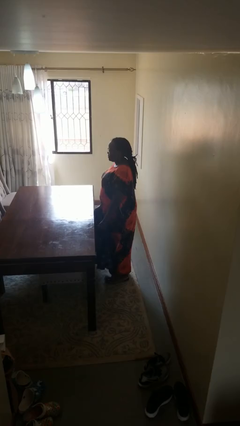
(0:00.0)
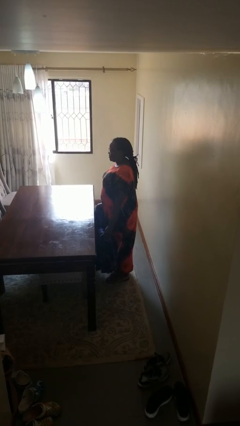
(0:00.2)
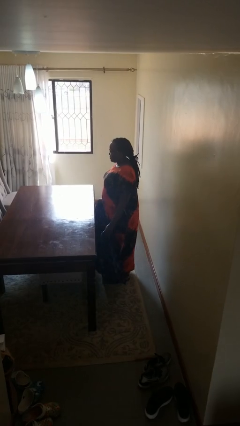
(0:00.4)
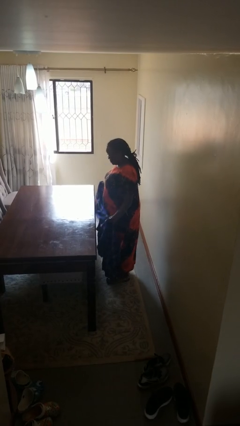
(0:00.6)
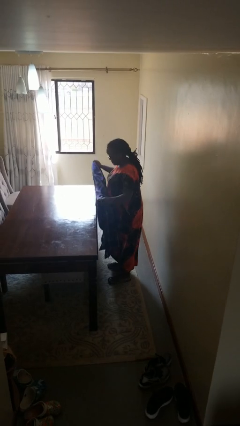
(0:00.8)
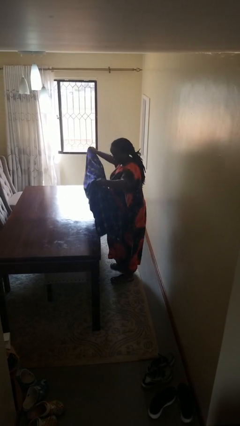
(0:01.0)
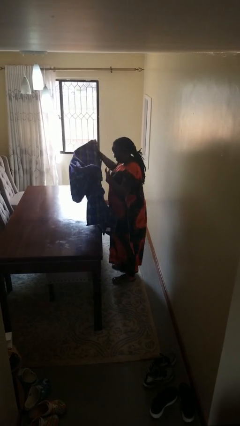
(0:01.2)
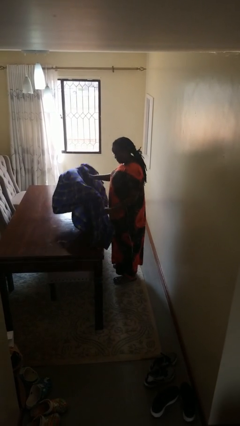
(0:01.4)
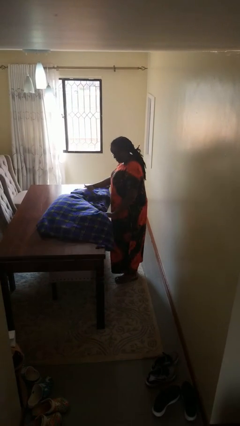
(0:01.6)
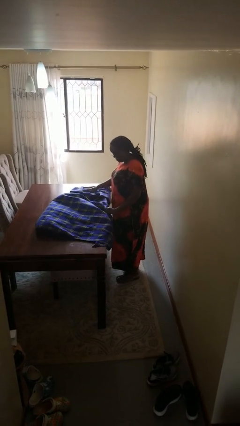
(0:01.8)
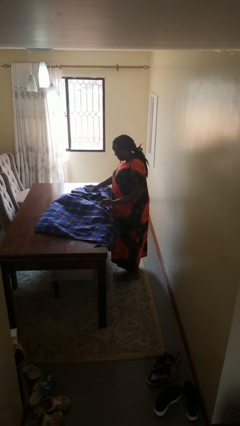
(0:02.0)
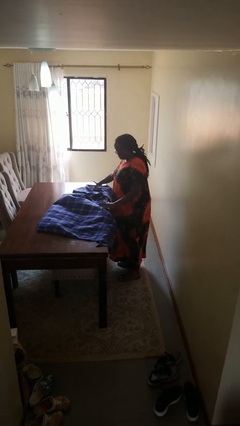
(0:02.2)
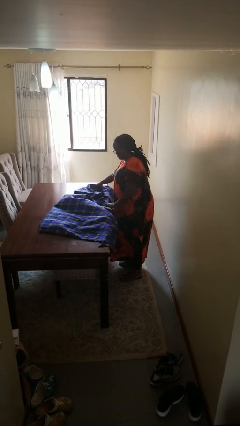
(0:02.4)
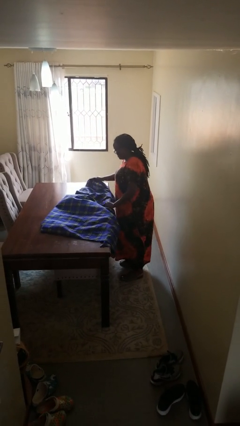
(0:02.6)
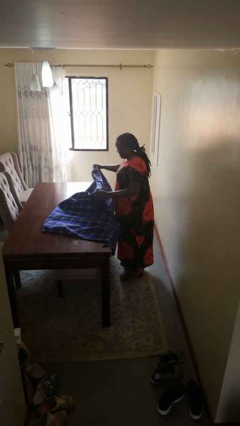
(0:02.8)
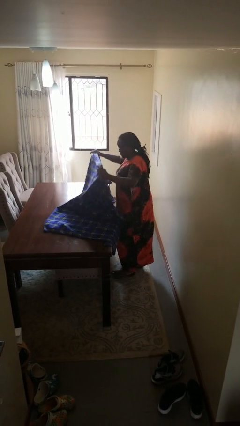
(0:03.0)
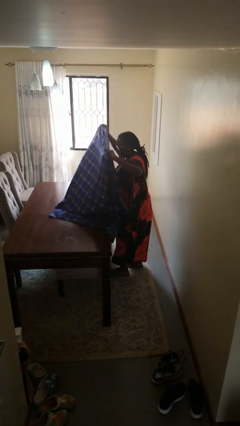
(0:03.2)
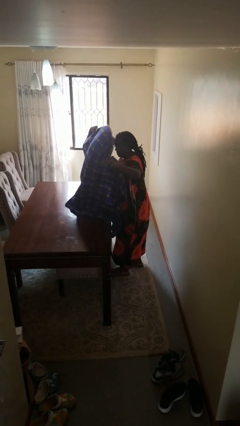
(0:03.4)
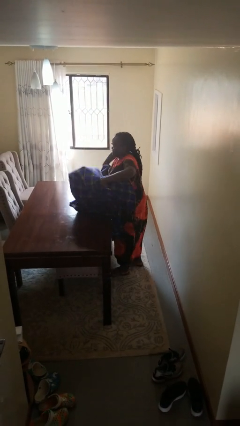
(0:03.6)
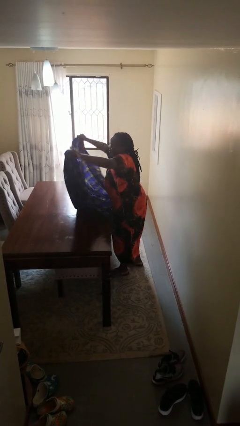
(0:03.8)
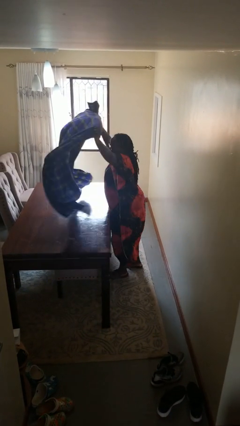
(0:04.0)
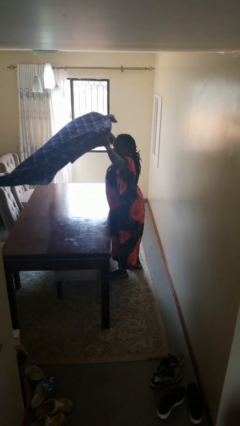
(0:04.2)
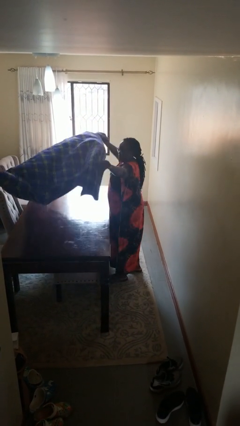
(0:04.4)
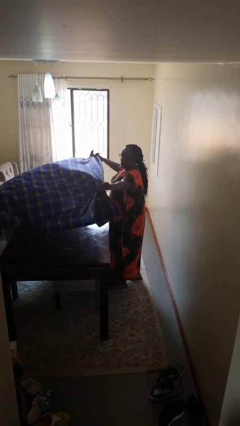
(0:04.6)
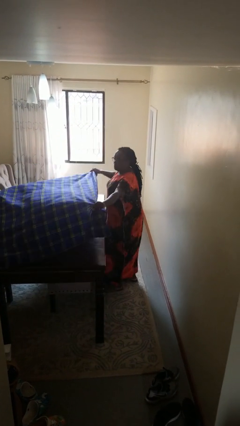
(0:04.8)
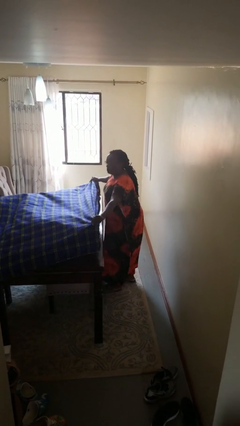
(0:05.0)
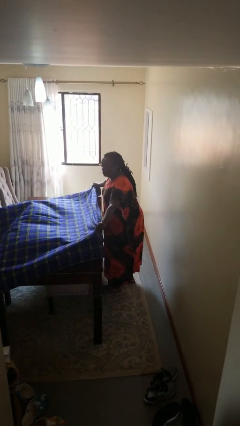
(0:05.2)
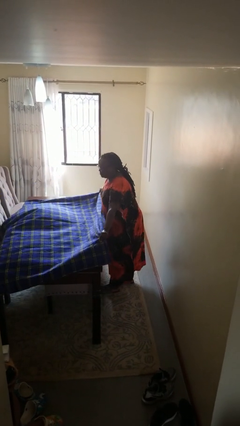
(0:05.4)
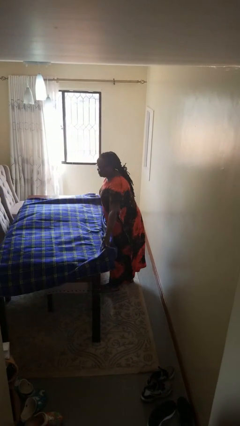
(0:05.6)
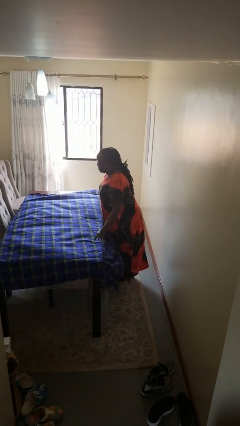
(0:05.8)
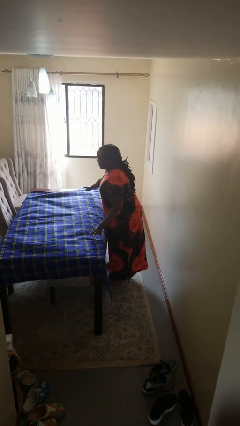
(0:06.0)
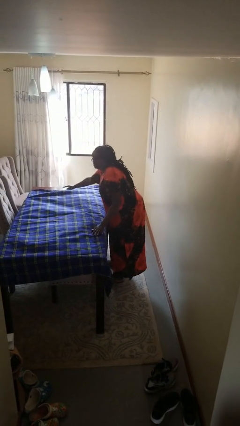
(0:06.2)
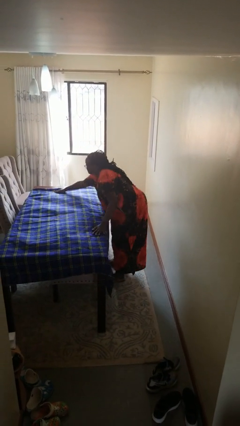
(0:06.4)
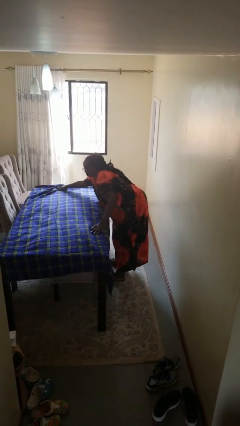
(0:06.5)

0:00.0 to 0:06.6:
person spreads tablecloth

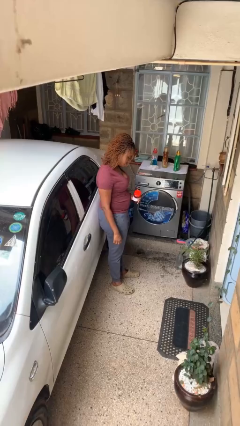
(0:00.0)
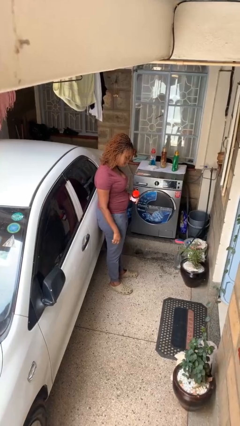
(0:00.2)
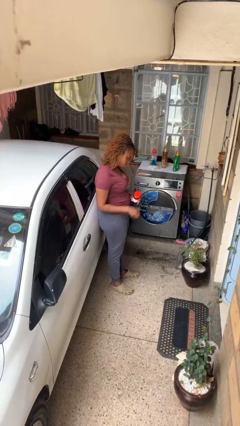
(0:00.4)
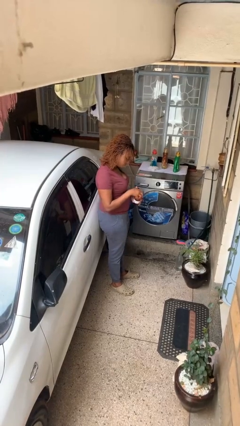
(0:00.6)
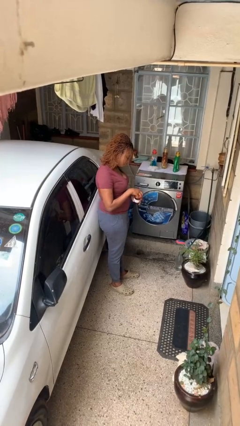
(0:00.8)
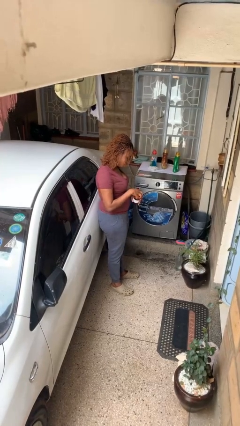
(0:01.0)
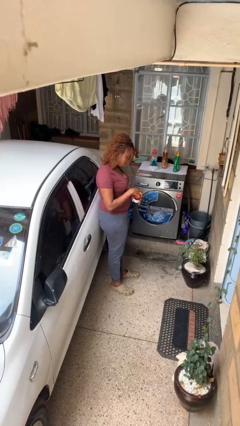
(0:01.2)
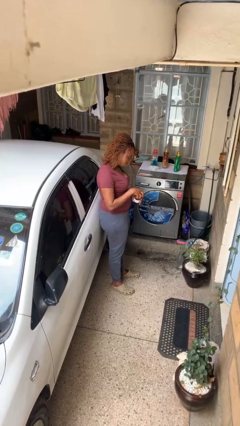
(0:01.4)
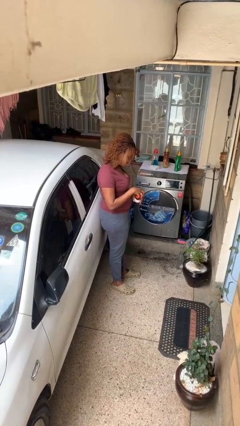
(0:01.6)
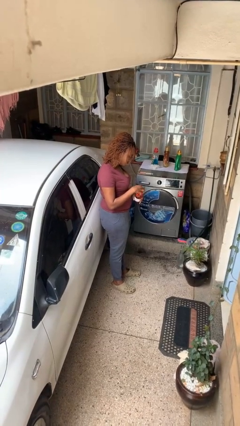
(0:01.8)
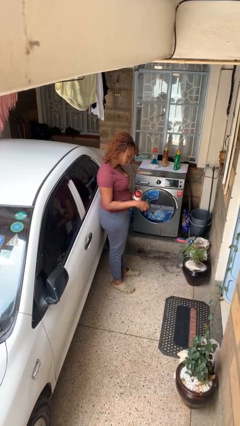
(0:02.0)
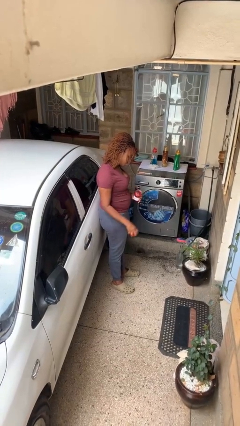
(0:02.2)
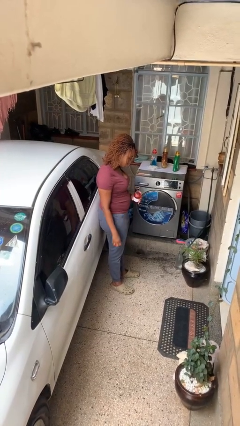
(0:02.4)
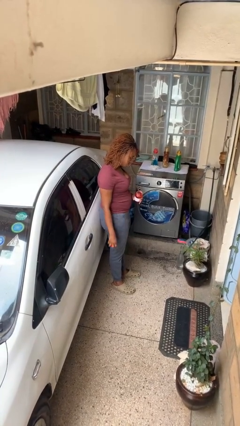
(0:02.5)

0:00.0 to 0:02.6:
person opens jar

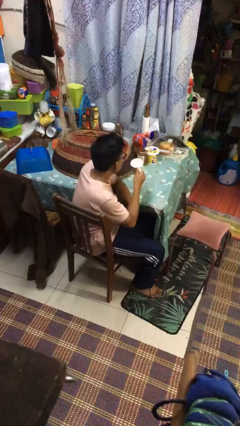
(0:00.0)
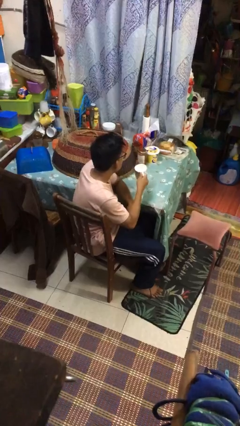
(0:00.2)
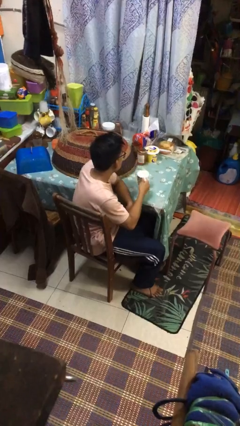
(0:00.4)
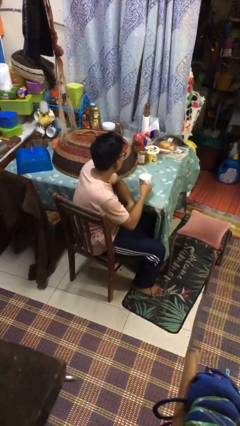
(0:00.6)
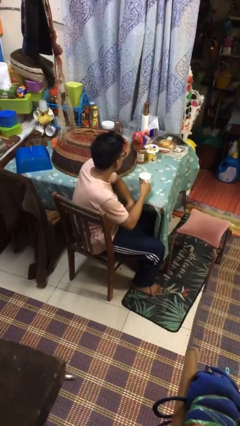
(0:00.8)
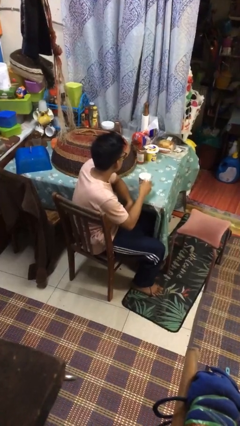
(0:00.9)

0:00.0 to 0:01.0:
person puts down object on table

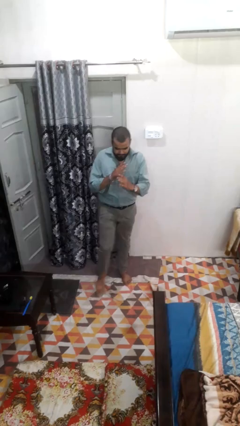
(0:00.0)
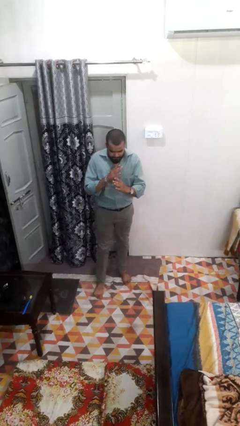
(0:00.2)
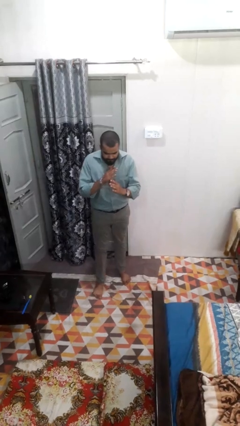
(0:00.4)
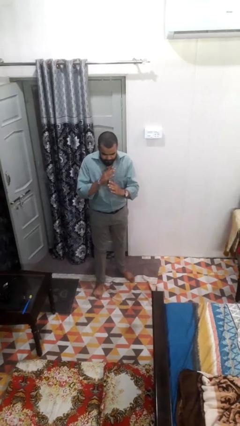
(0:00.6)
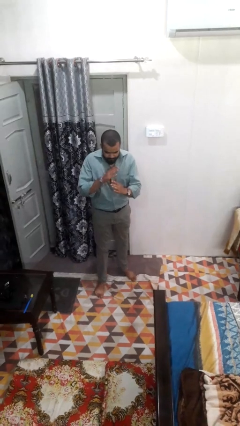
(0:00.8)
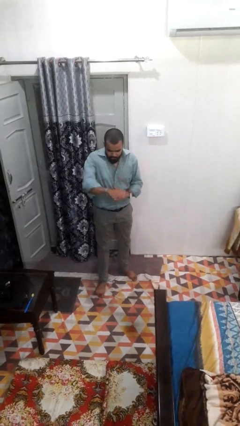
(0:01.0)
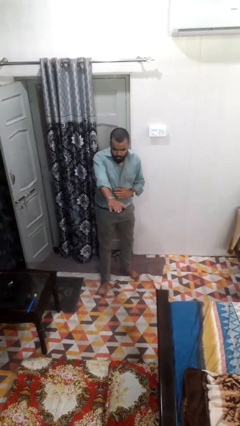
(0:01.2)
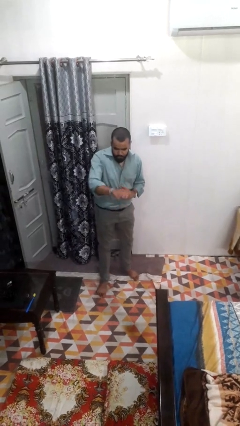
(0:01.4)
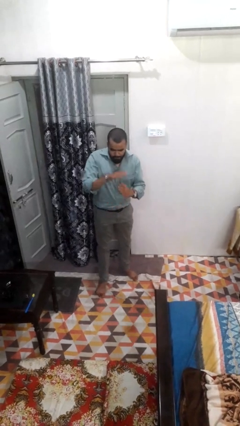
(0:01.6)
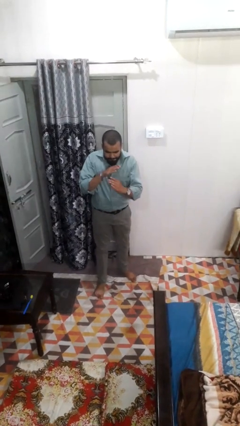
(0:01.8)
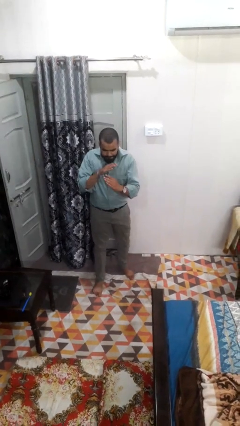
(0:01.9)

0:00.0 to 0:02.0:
person karate chop

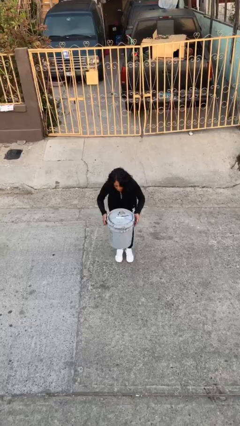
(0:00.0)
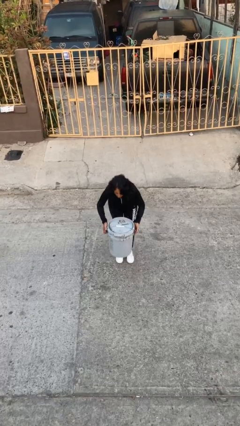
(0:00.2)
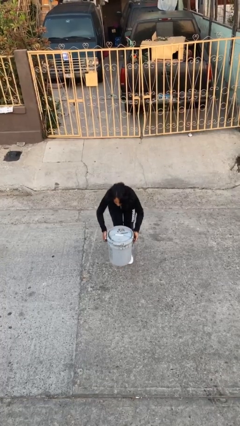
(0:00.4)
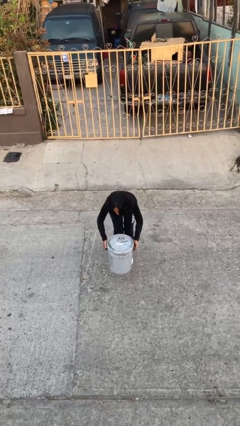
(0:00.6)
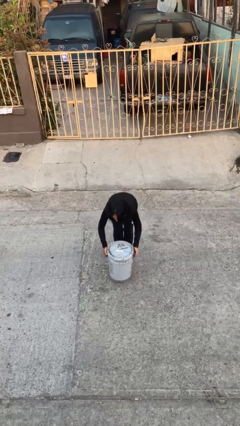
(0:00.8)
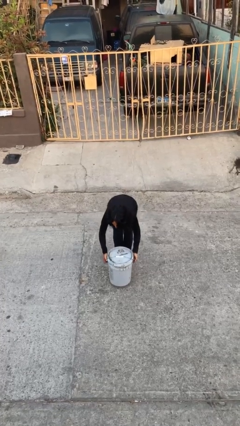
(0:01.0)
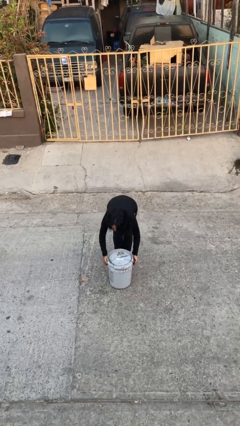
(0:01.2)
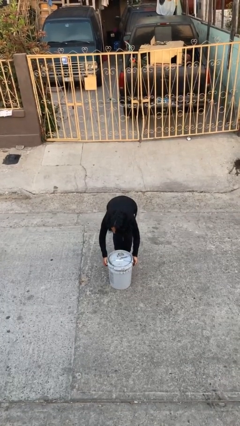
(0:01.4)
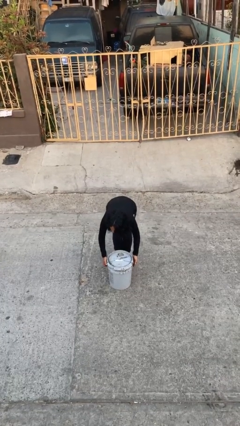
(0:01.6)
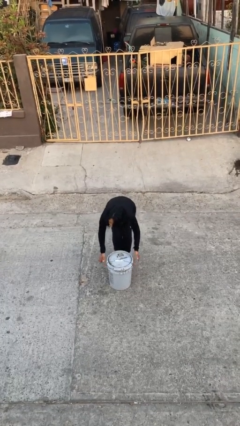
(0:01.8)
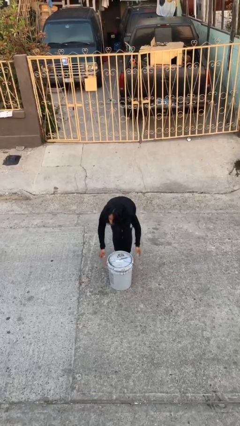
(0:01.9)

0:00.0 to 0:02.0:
person puts down object on floor

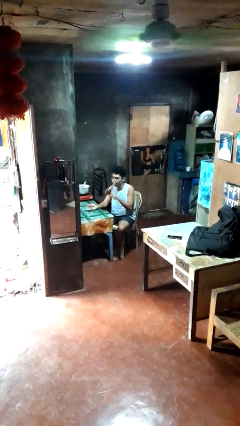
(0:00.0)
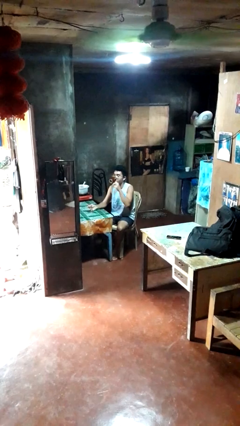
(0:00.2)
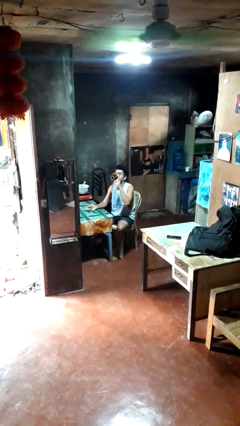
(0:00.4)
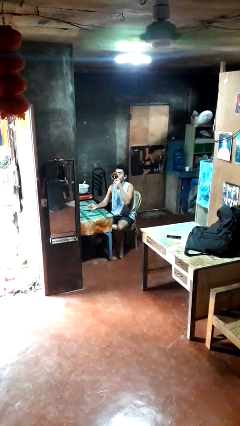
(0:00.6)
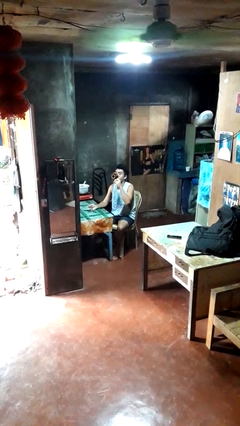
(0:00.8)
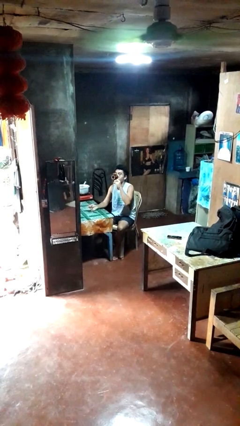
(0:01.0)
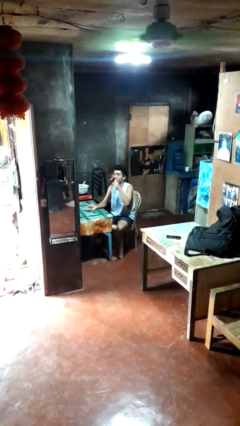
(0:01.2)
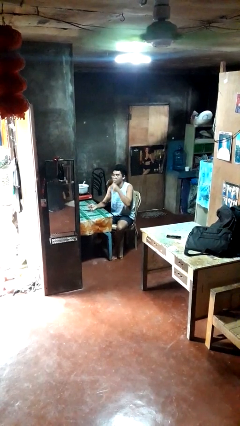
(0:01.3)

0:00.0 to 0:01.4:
person drinks from mug

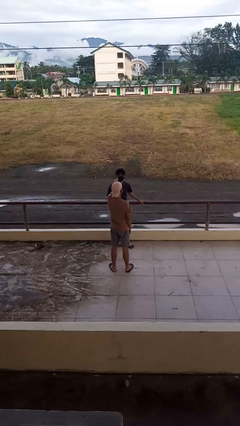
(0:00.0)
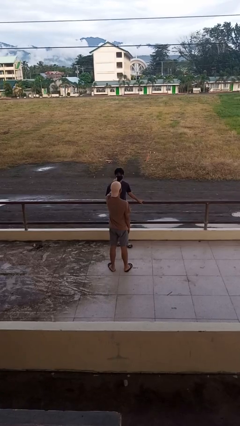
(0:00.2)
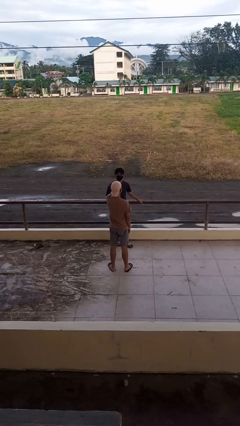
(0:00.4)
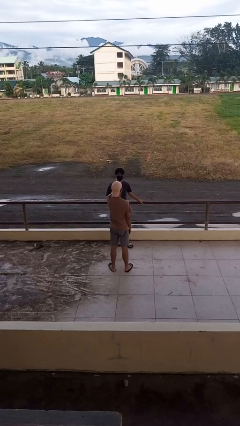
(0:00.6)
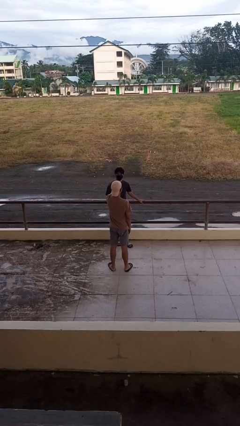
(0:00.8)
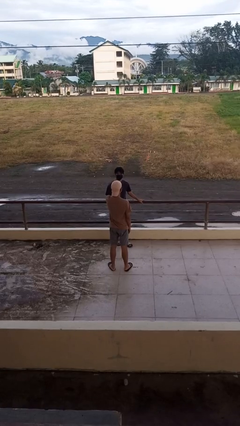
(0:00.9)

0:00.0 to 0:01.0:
person points at person

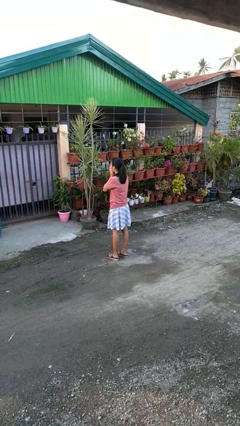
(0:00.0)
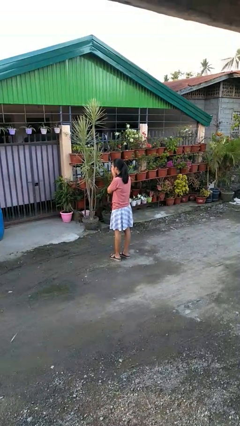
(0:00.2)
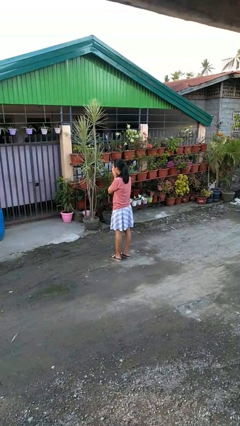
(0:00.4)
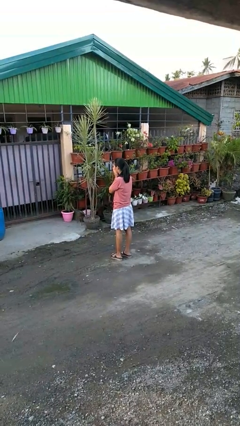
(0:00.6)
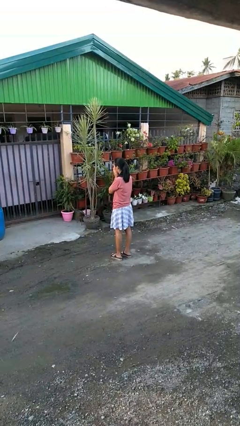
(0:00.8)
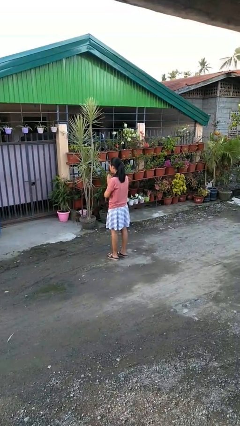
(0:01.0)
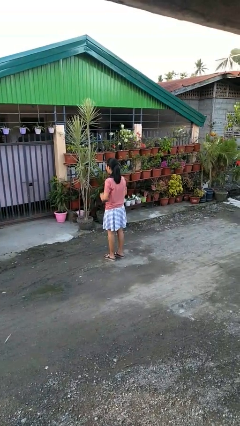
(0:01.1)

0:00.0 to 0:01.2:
person blows into hands
